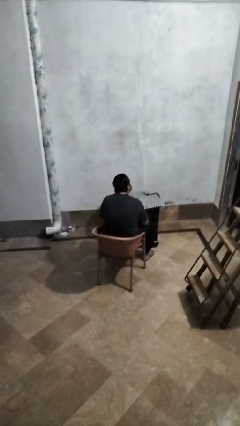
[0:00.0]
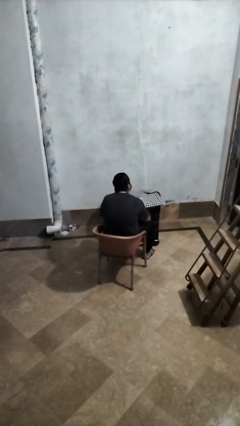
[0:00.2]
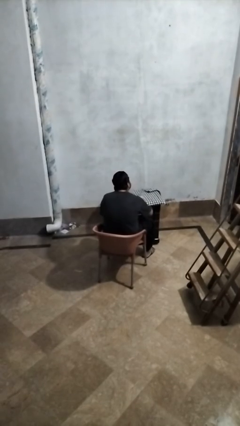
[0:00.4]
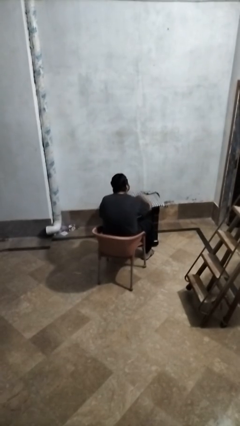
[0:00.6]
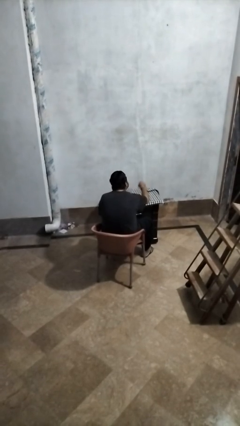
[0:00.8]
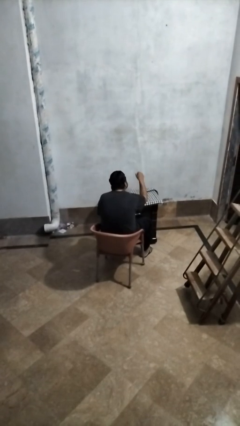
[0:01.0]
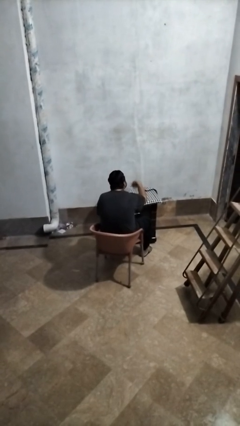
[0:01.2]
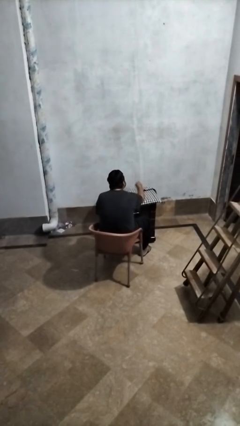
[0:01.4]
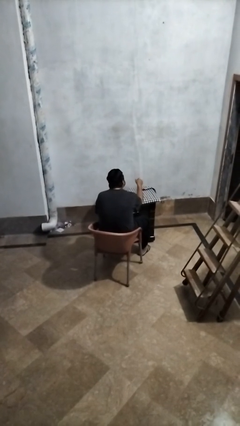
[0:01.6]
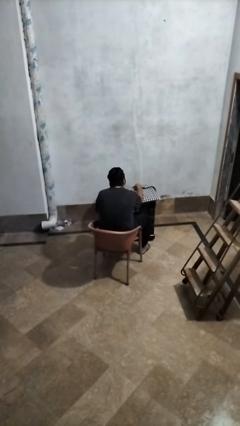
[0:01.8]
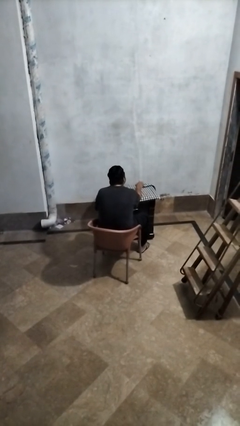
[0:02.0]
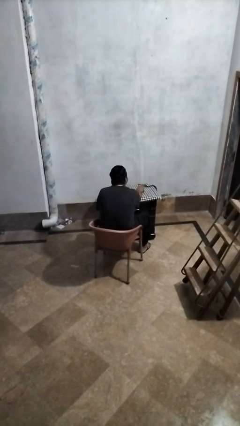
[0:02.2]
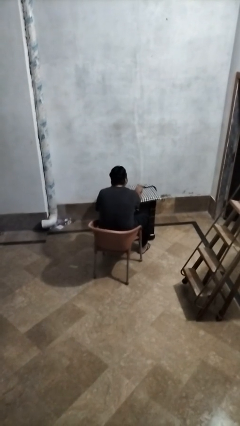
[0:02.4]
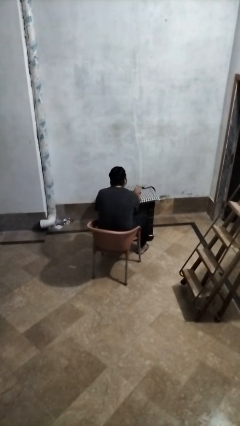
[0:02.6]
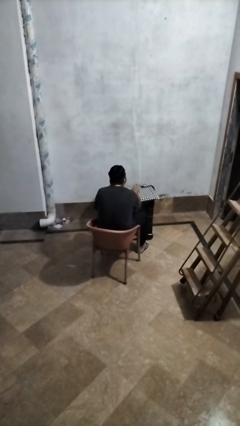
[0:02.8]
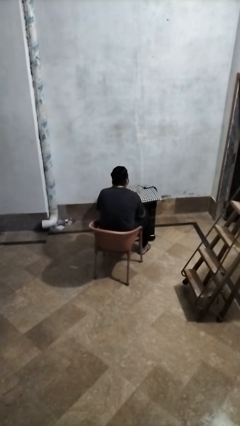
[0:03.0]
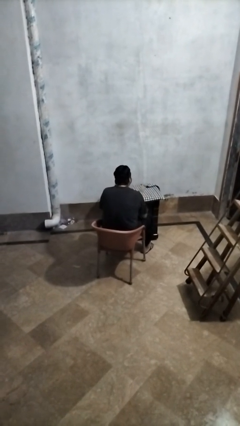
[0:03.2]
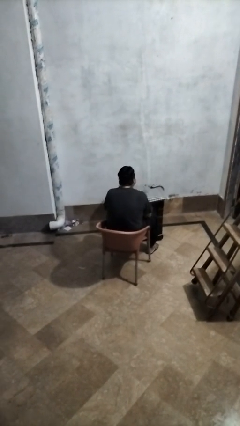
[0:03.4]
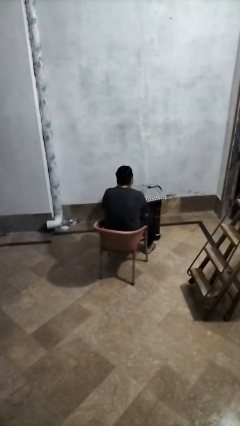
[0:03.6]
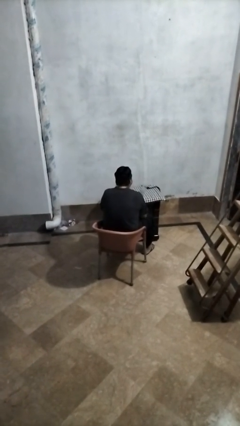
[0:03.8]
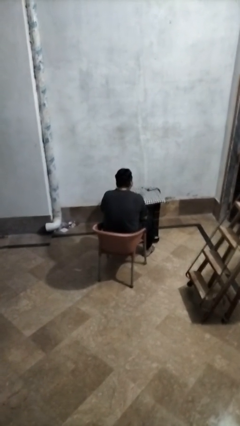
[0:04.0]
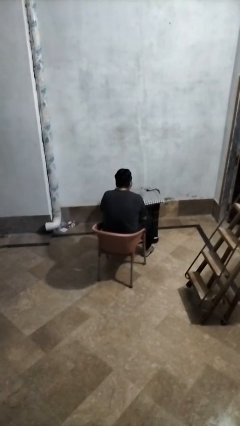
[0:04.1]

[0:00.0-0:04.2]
person knocks over glass

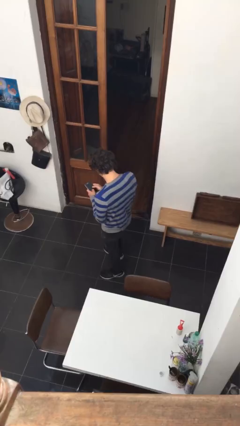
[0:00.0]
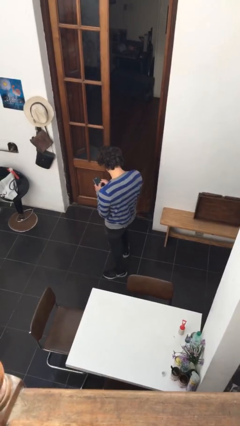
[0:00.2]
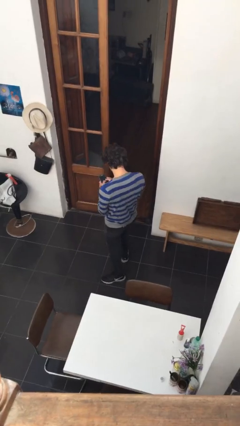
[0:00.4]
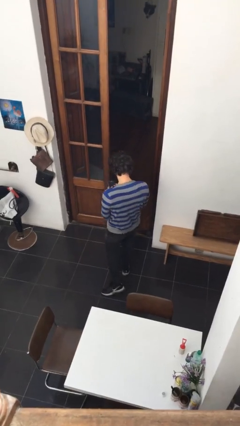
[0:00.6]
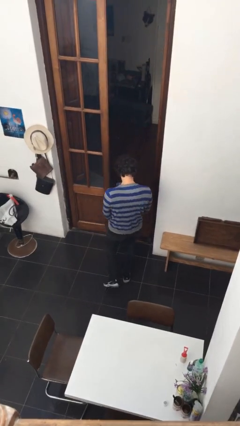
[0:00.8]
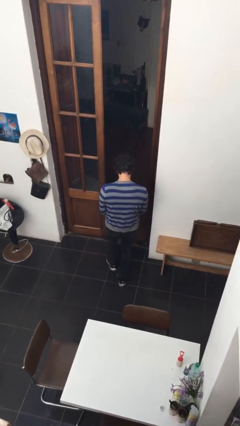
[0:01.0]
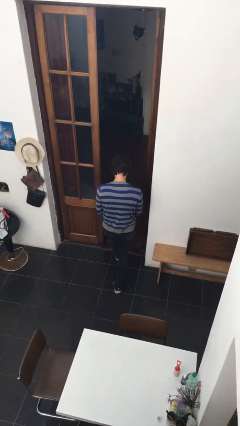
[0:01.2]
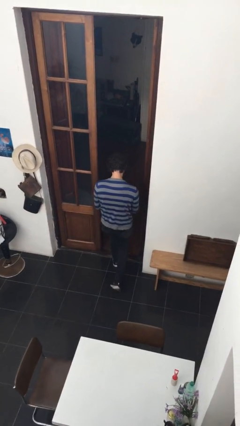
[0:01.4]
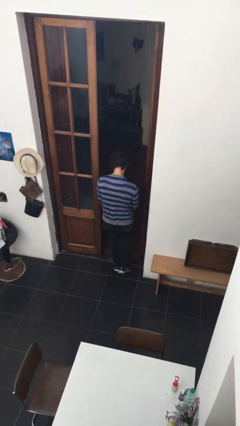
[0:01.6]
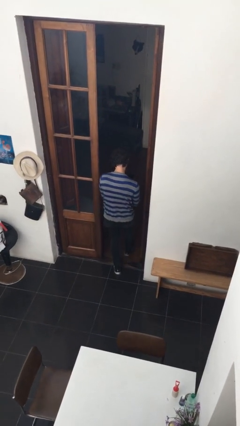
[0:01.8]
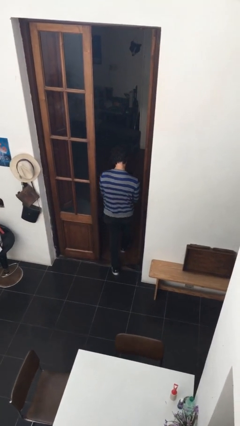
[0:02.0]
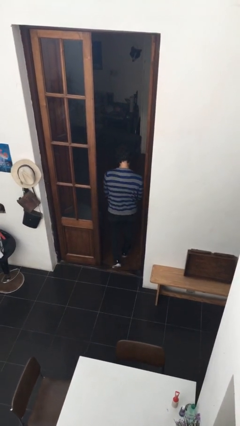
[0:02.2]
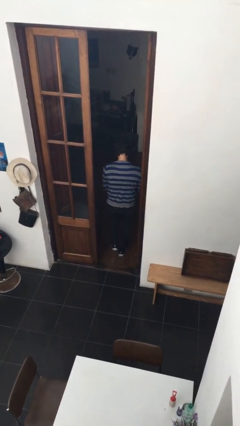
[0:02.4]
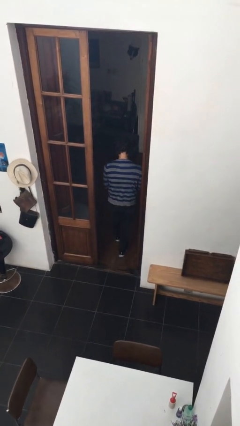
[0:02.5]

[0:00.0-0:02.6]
person exits scene through structure

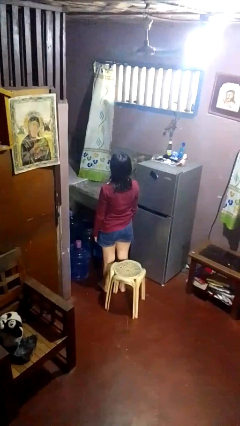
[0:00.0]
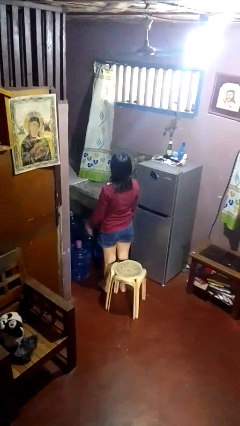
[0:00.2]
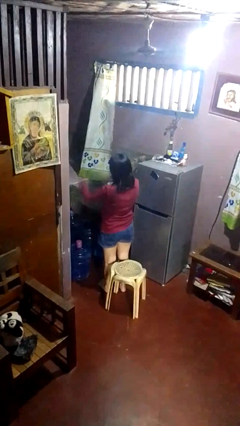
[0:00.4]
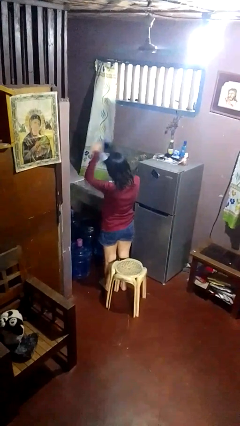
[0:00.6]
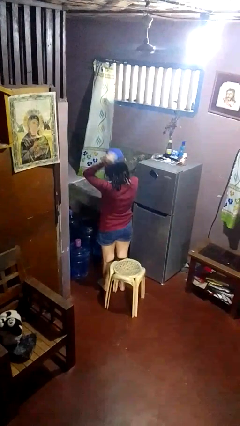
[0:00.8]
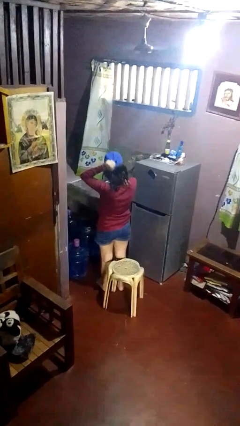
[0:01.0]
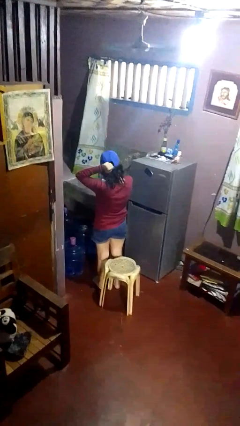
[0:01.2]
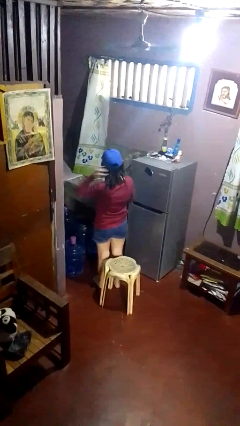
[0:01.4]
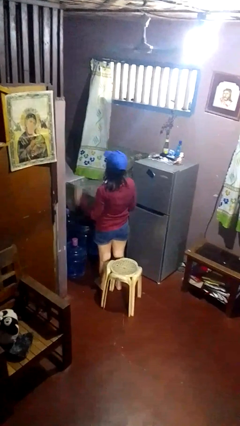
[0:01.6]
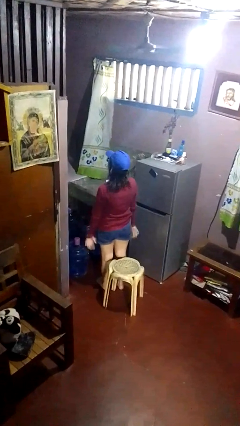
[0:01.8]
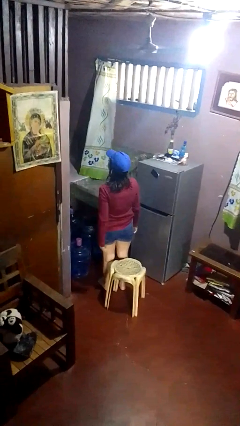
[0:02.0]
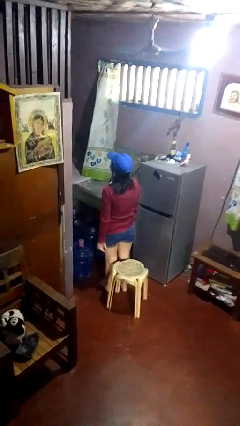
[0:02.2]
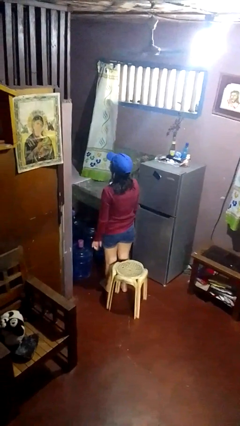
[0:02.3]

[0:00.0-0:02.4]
person puts on hat

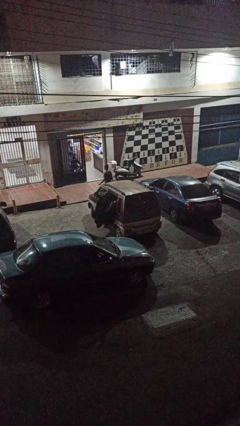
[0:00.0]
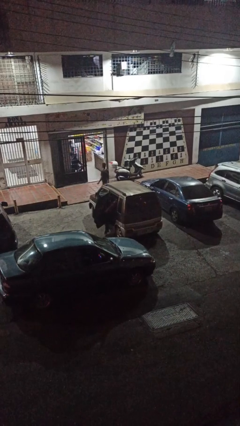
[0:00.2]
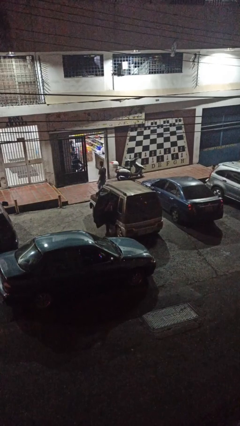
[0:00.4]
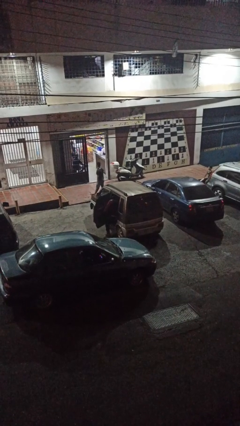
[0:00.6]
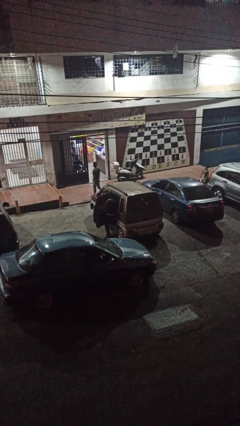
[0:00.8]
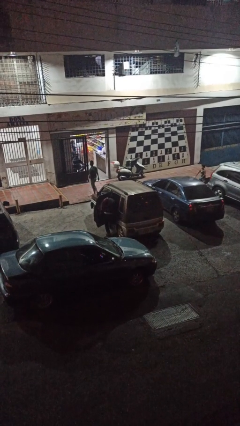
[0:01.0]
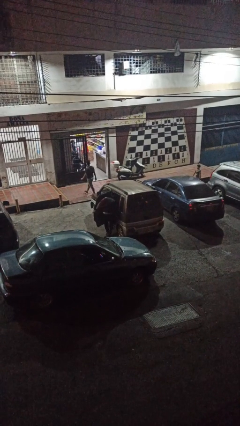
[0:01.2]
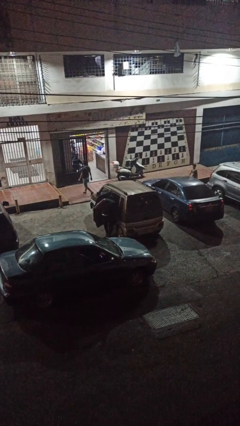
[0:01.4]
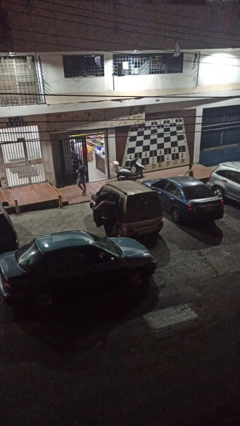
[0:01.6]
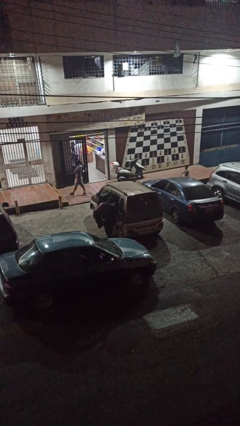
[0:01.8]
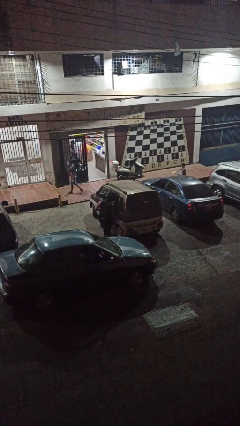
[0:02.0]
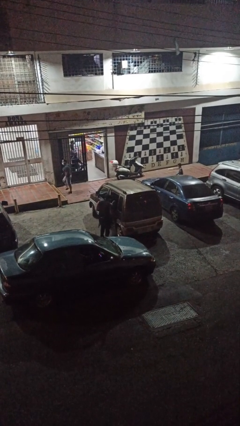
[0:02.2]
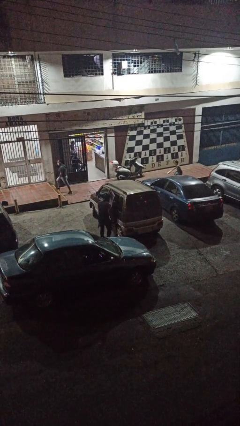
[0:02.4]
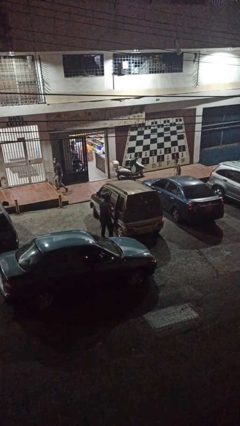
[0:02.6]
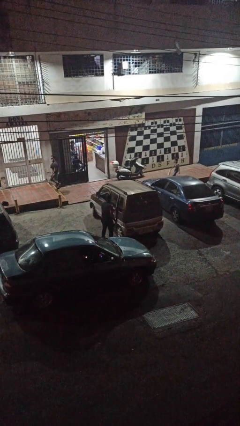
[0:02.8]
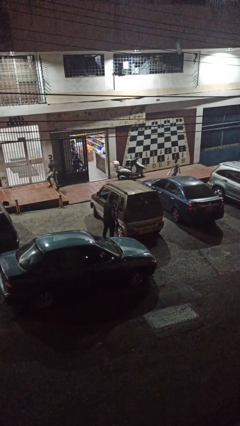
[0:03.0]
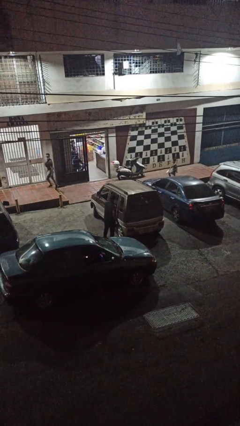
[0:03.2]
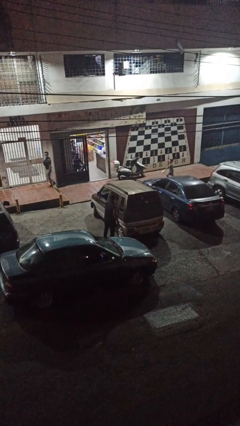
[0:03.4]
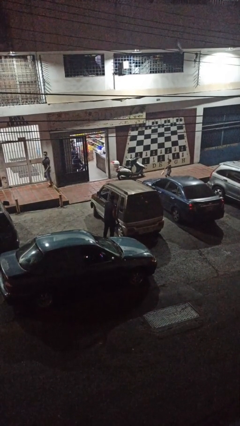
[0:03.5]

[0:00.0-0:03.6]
car drops off person

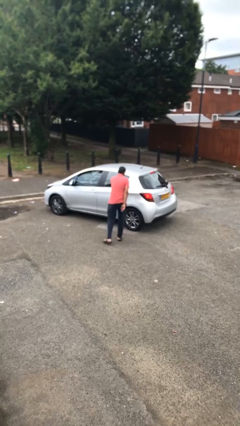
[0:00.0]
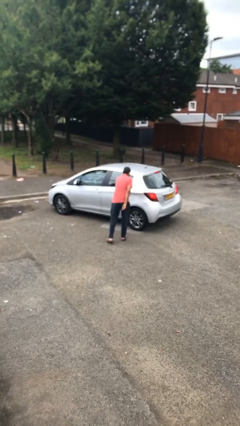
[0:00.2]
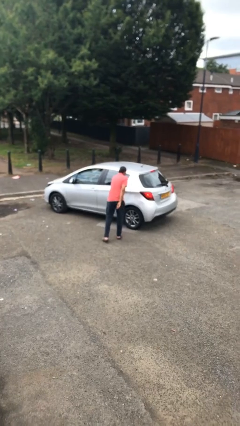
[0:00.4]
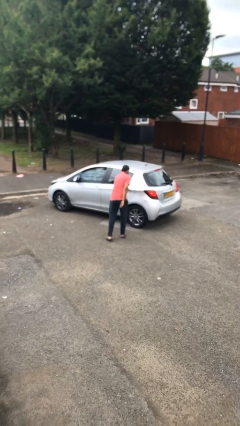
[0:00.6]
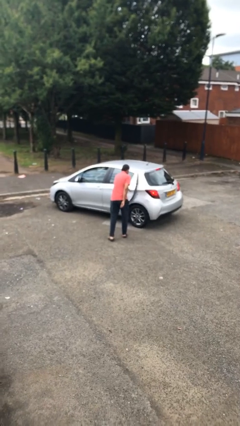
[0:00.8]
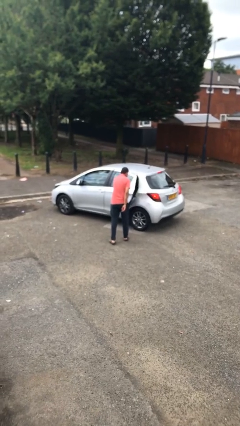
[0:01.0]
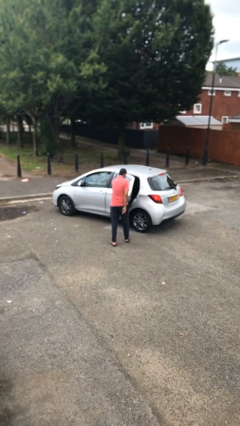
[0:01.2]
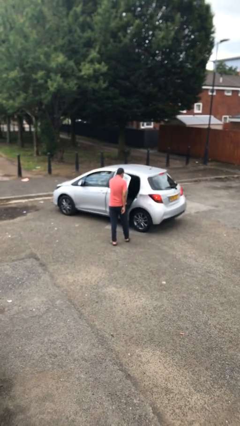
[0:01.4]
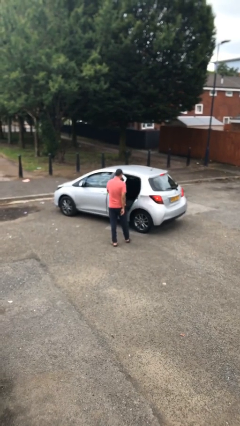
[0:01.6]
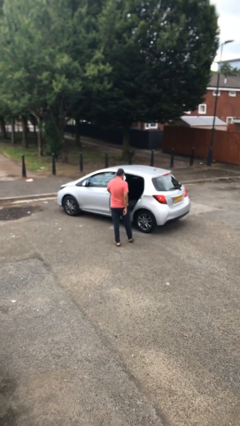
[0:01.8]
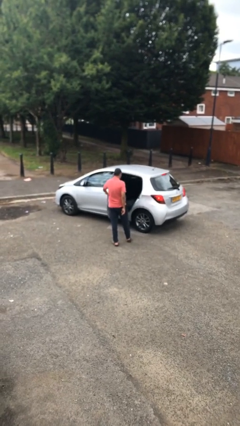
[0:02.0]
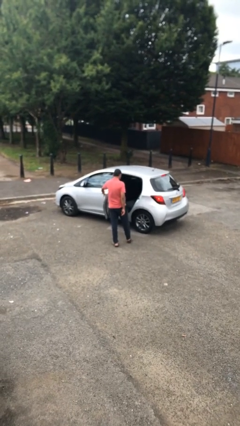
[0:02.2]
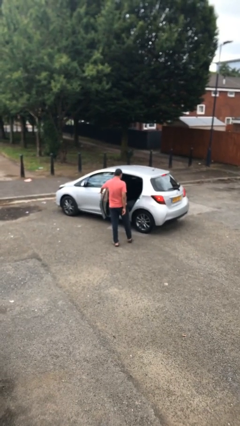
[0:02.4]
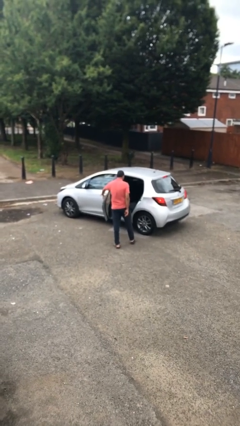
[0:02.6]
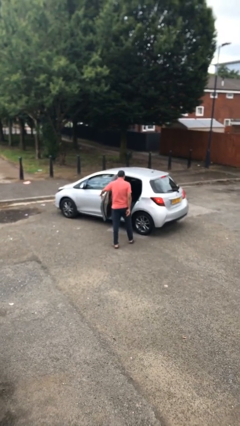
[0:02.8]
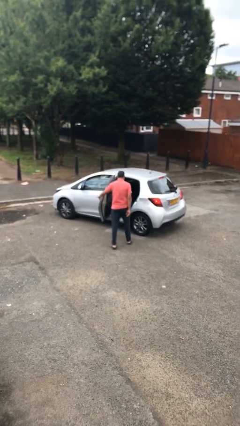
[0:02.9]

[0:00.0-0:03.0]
person opens car door

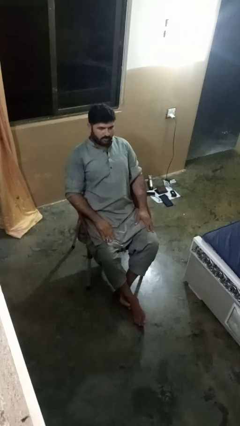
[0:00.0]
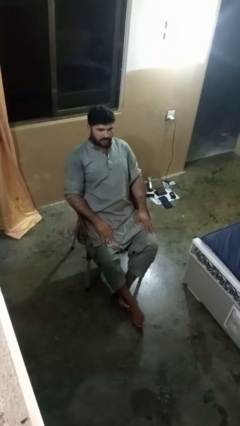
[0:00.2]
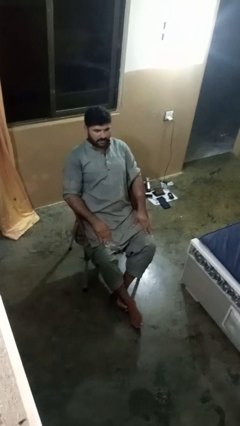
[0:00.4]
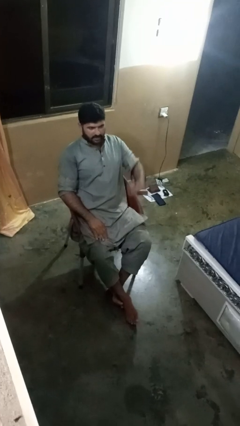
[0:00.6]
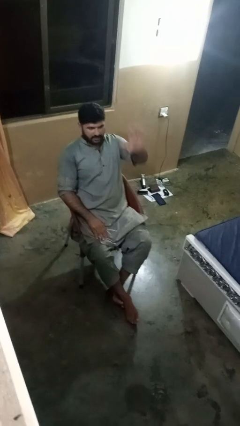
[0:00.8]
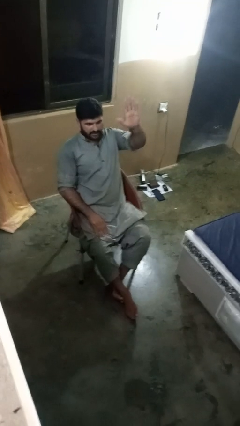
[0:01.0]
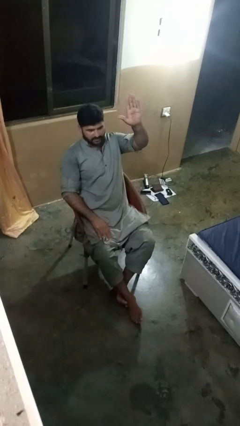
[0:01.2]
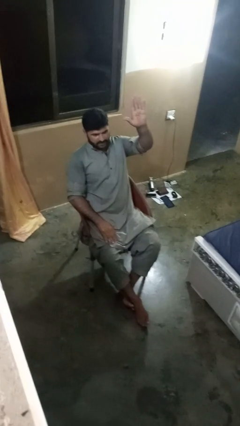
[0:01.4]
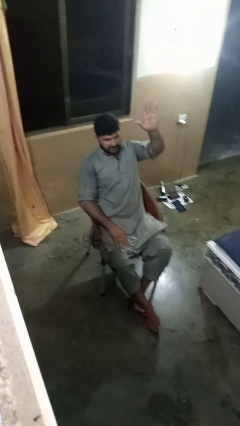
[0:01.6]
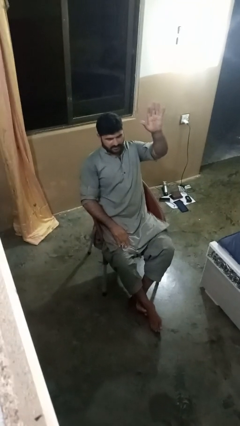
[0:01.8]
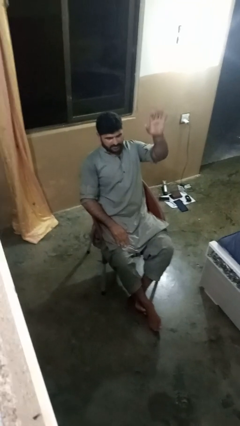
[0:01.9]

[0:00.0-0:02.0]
person gestures number five
